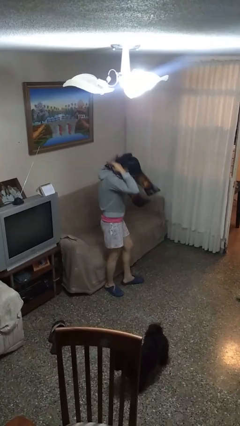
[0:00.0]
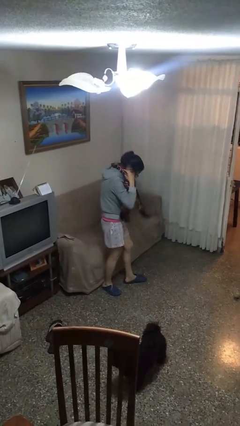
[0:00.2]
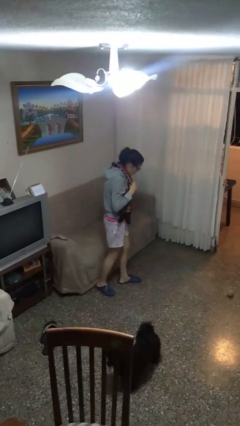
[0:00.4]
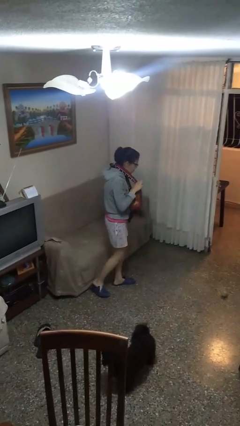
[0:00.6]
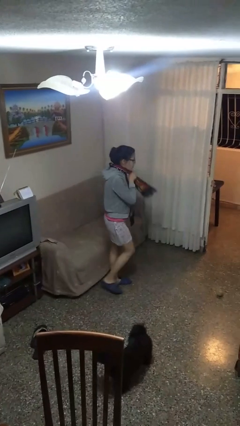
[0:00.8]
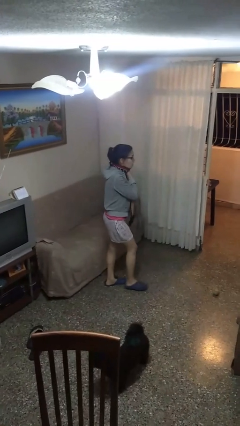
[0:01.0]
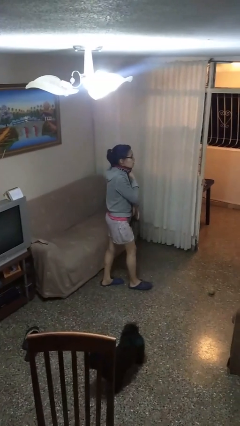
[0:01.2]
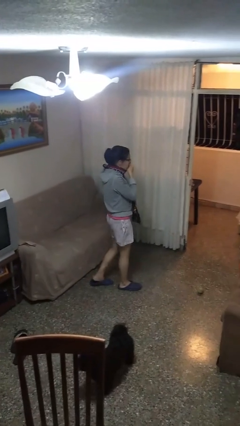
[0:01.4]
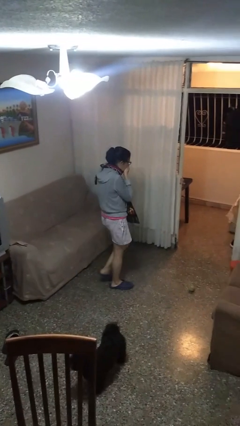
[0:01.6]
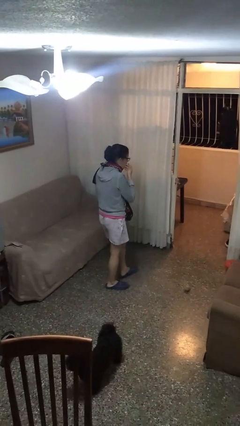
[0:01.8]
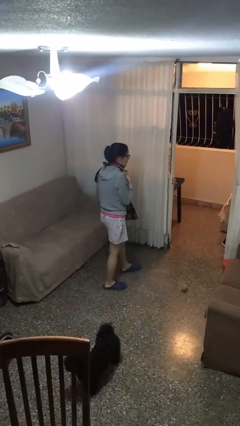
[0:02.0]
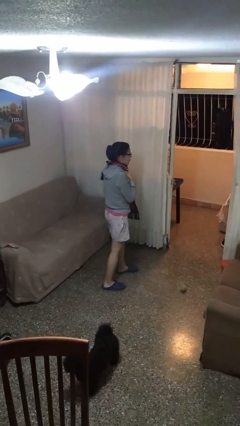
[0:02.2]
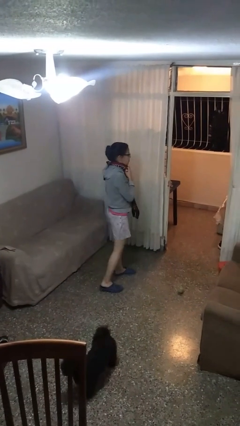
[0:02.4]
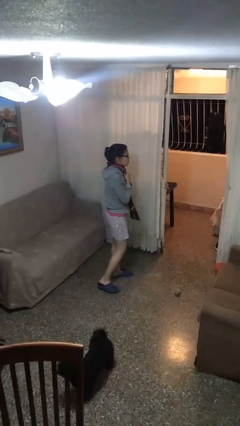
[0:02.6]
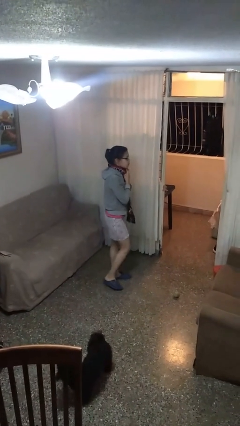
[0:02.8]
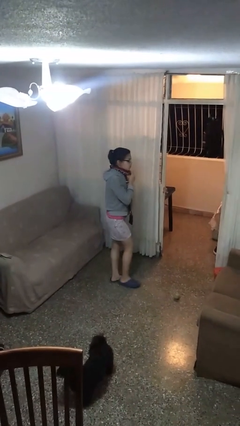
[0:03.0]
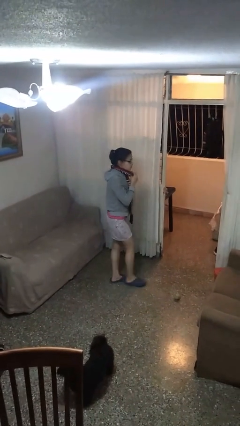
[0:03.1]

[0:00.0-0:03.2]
person puts on scarf

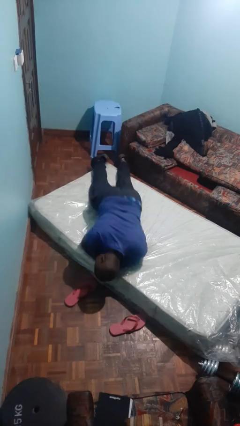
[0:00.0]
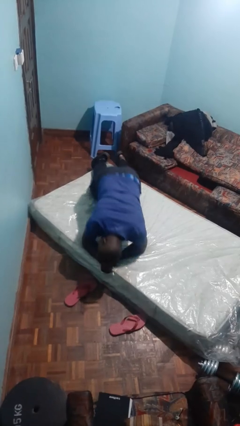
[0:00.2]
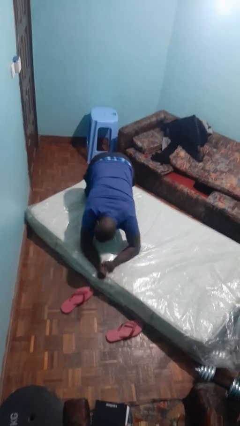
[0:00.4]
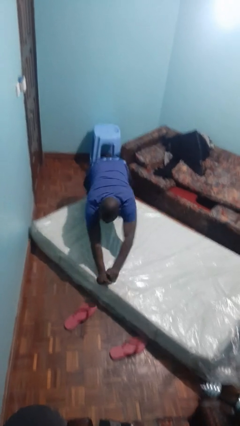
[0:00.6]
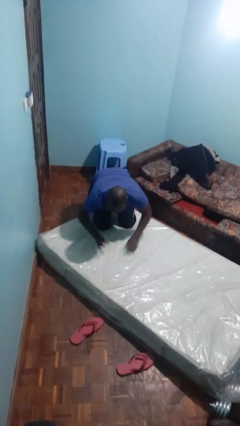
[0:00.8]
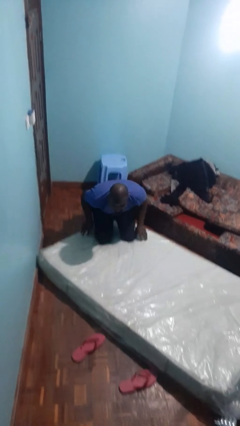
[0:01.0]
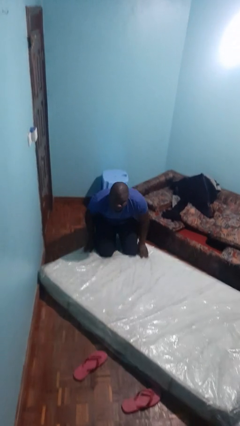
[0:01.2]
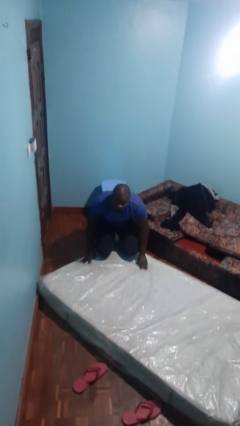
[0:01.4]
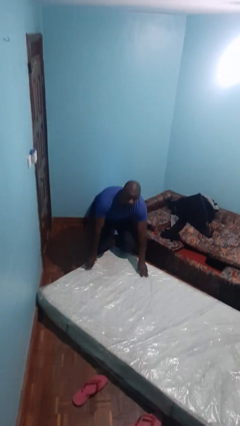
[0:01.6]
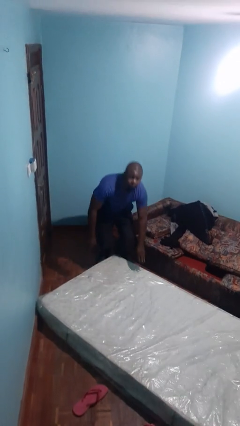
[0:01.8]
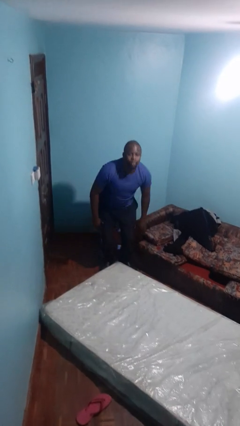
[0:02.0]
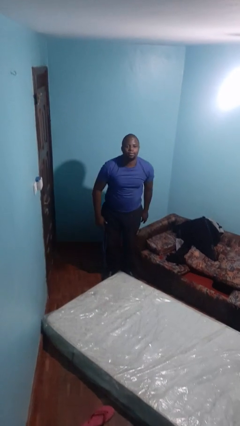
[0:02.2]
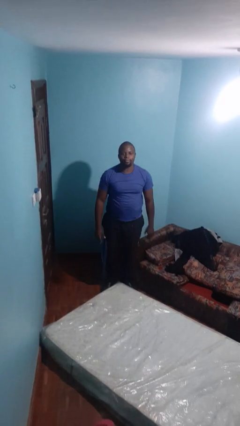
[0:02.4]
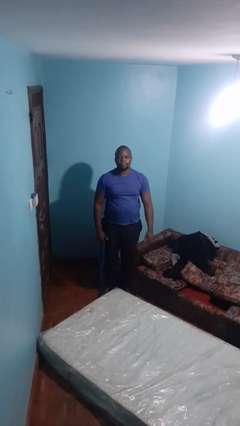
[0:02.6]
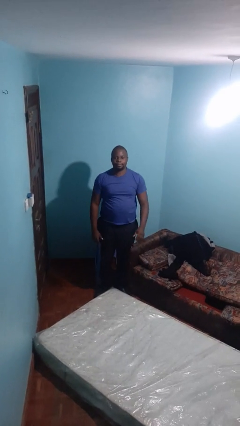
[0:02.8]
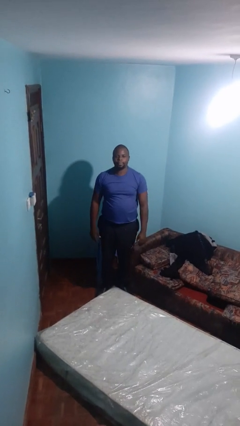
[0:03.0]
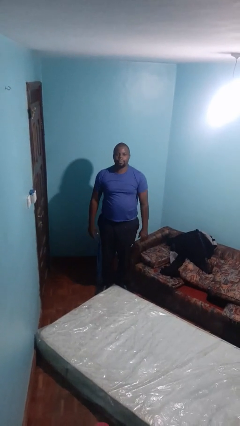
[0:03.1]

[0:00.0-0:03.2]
person stands up

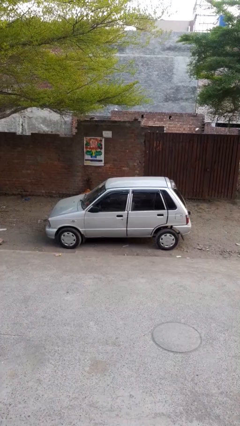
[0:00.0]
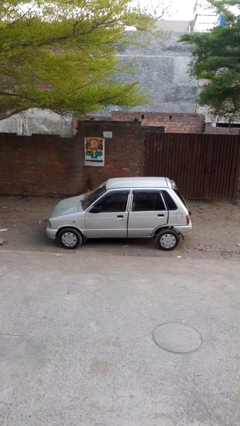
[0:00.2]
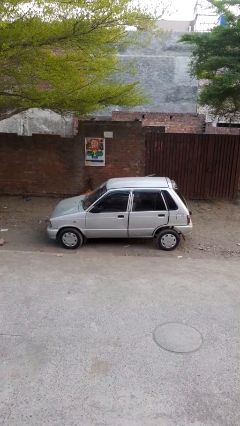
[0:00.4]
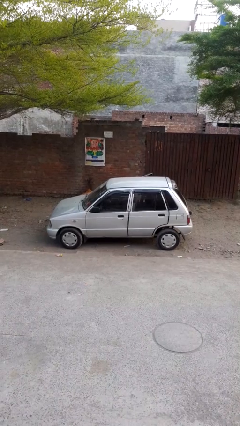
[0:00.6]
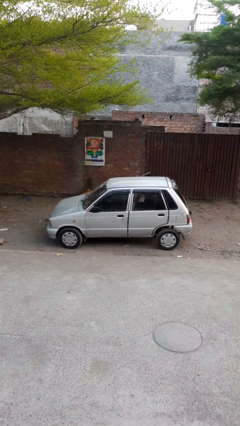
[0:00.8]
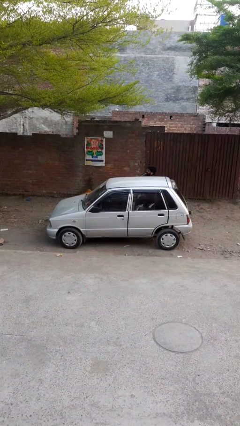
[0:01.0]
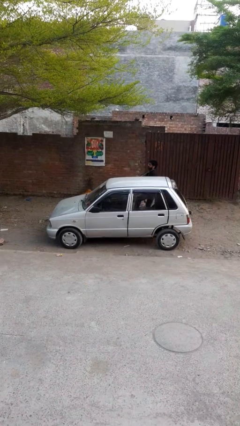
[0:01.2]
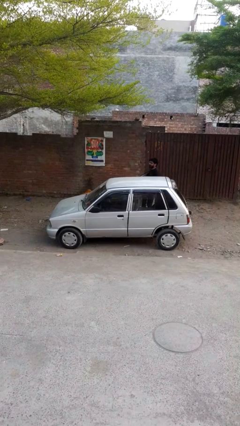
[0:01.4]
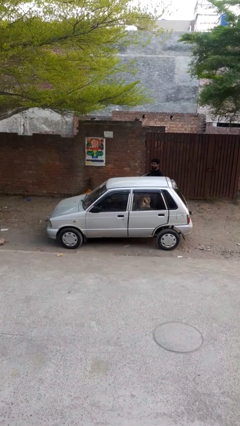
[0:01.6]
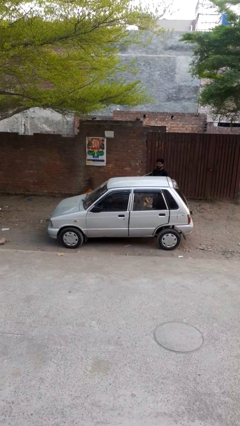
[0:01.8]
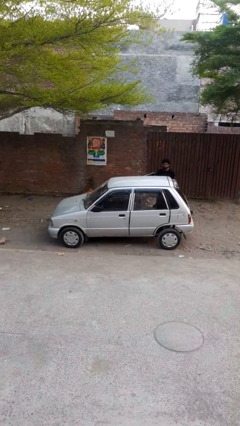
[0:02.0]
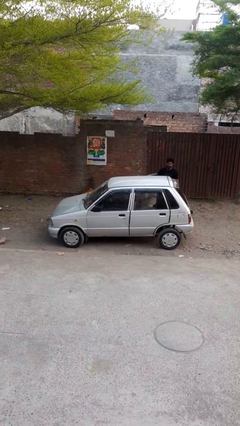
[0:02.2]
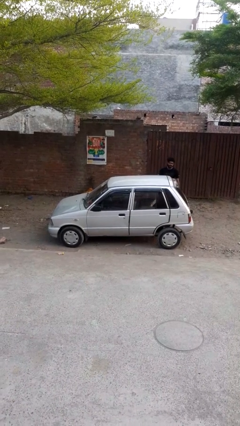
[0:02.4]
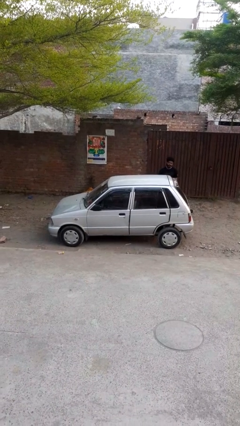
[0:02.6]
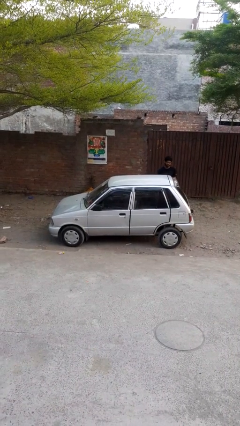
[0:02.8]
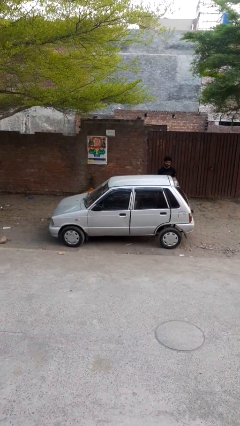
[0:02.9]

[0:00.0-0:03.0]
car drops off person

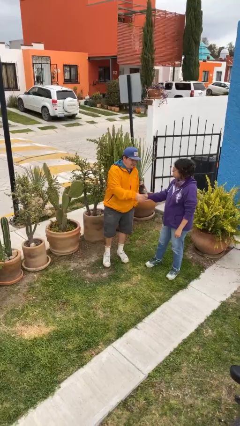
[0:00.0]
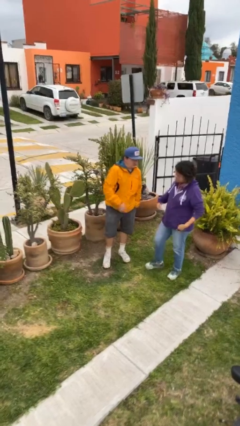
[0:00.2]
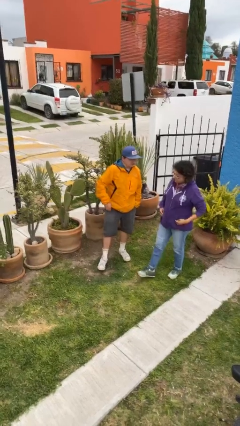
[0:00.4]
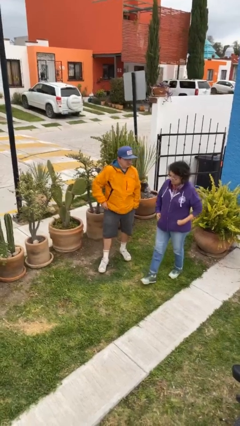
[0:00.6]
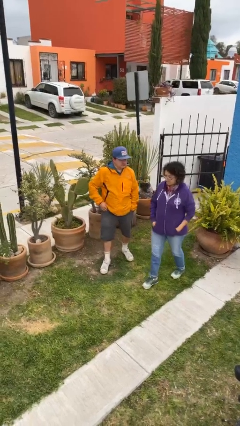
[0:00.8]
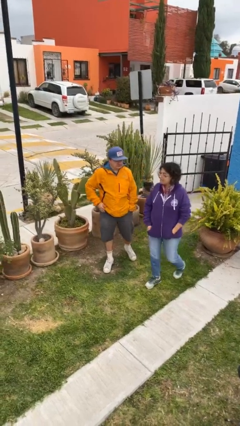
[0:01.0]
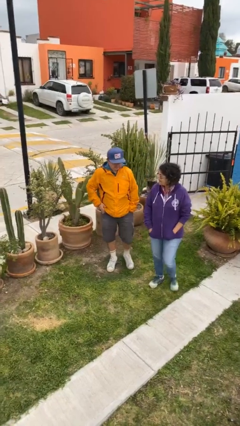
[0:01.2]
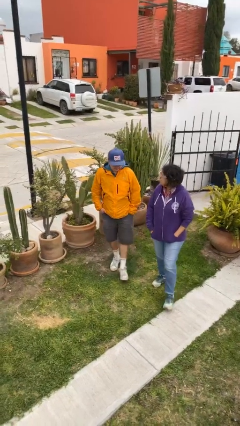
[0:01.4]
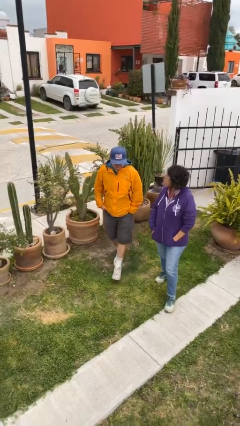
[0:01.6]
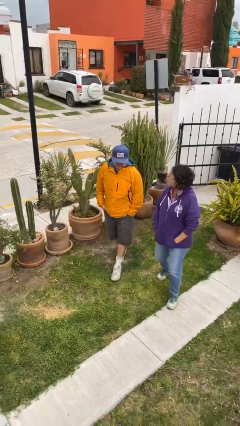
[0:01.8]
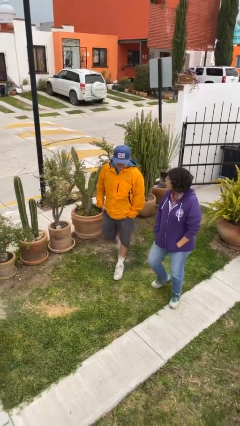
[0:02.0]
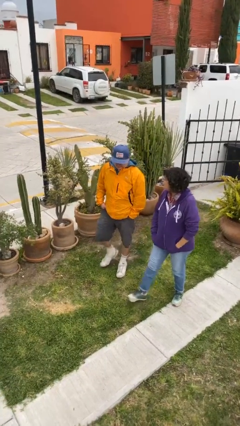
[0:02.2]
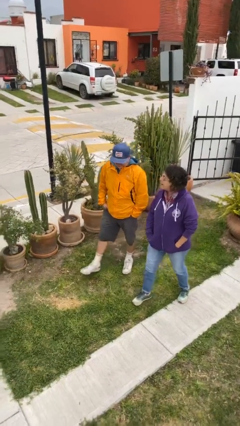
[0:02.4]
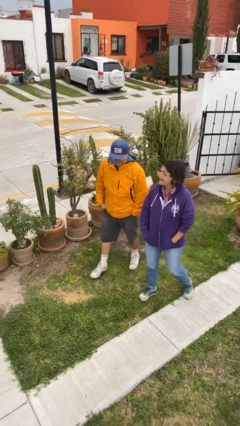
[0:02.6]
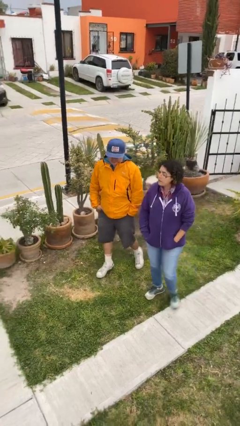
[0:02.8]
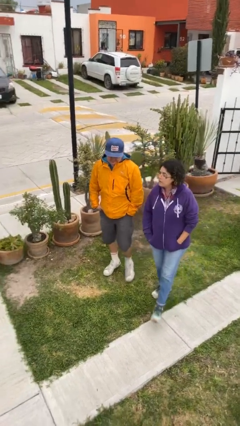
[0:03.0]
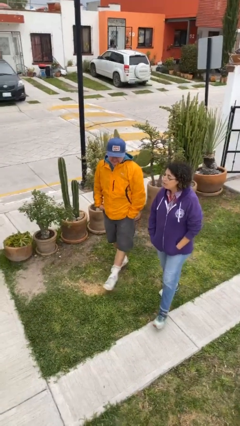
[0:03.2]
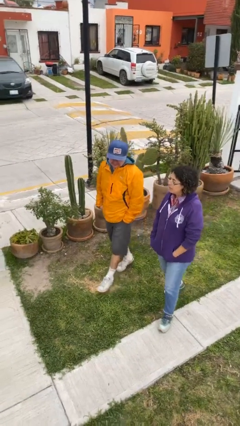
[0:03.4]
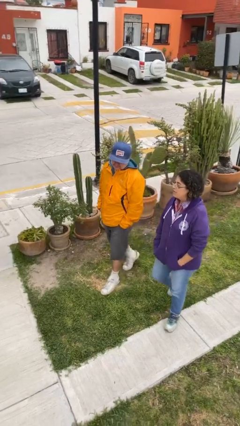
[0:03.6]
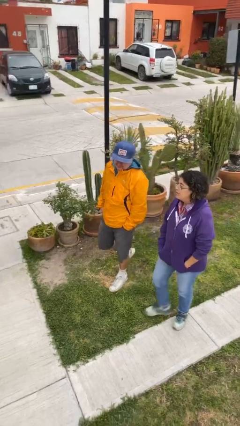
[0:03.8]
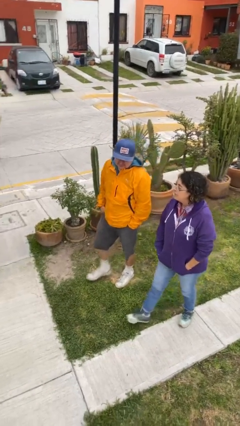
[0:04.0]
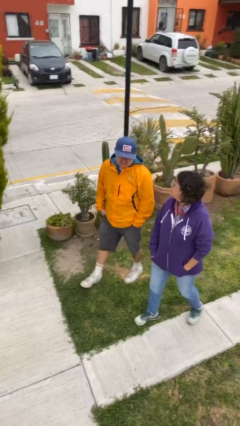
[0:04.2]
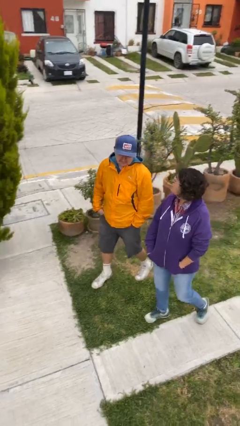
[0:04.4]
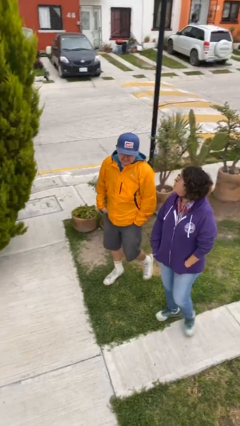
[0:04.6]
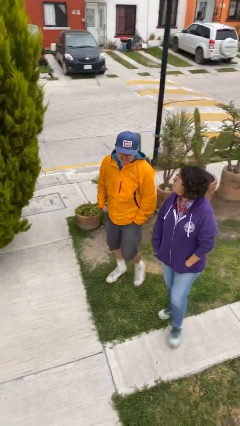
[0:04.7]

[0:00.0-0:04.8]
person talks to person

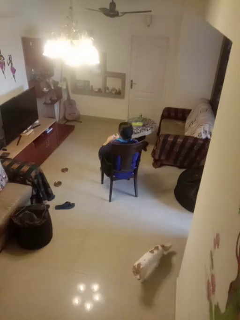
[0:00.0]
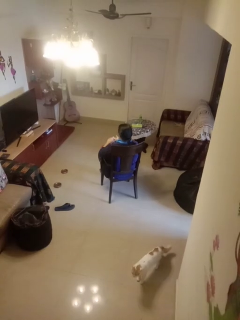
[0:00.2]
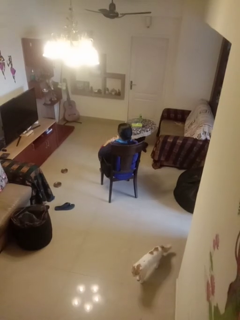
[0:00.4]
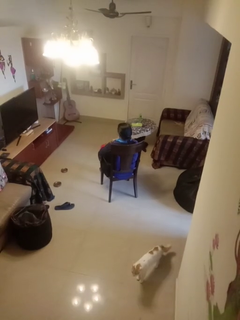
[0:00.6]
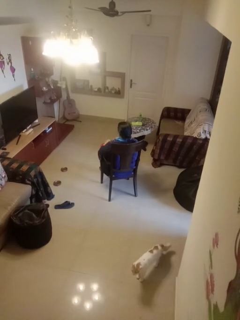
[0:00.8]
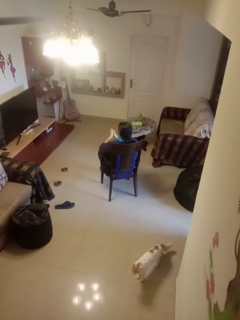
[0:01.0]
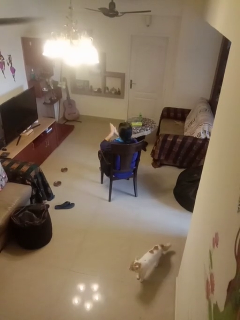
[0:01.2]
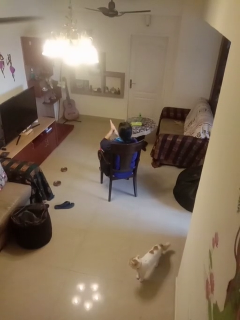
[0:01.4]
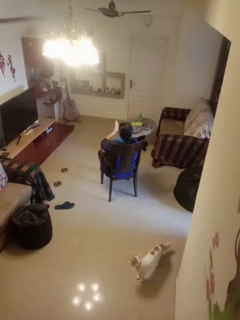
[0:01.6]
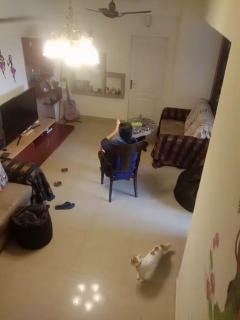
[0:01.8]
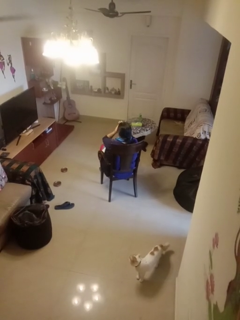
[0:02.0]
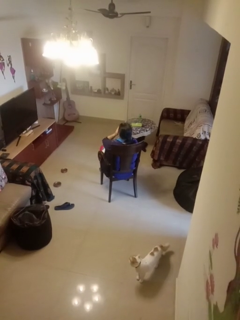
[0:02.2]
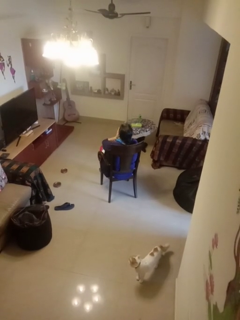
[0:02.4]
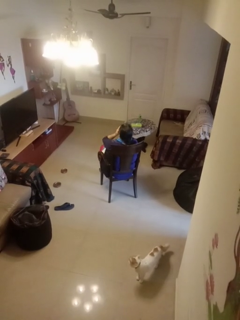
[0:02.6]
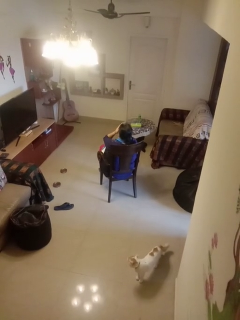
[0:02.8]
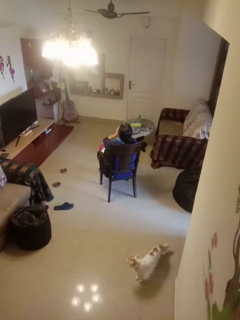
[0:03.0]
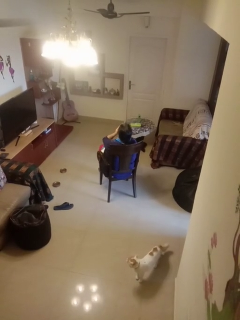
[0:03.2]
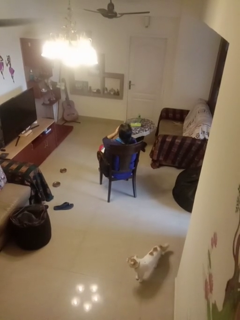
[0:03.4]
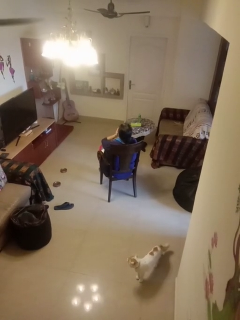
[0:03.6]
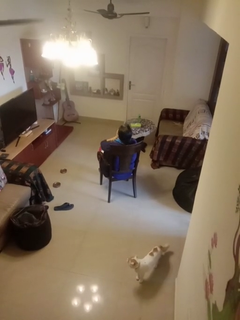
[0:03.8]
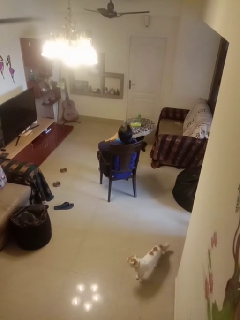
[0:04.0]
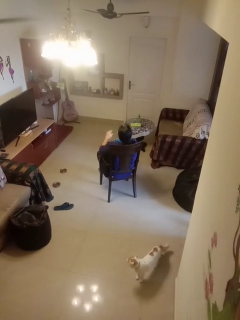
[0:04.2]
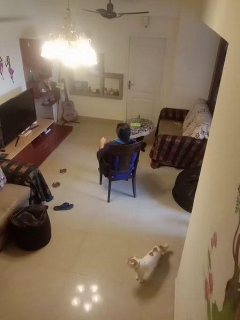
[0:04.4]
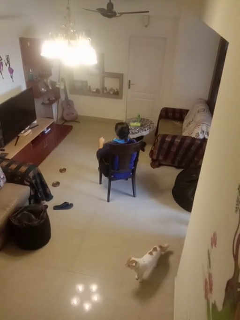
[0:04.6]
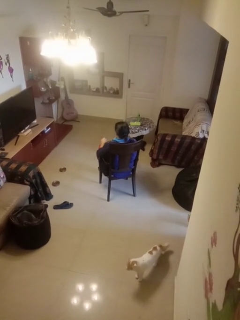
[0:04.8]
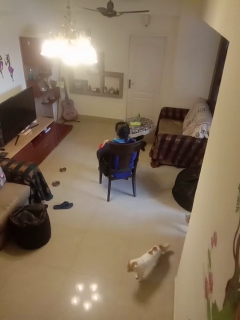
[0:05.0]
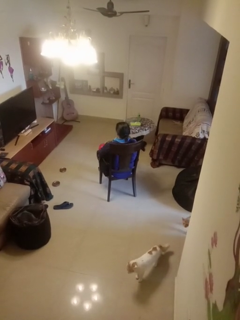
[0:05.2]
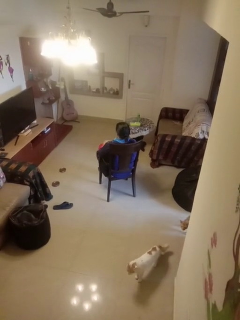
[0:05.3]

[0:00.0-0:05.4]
person applies facial moisturizer
